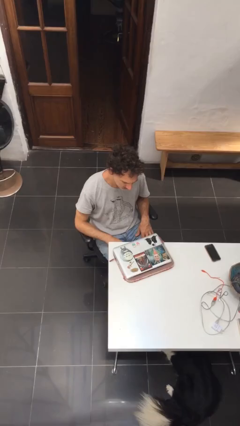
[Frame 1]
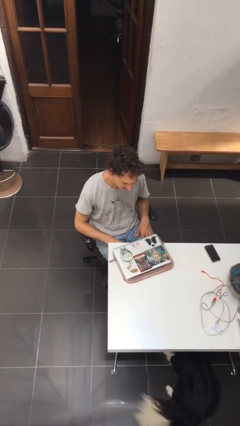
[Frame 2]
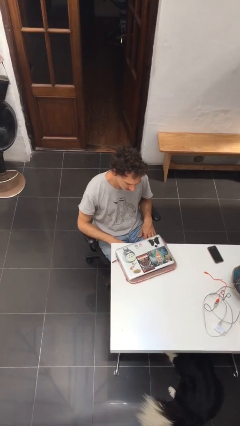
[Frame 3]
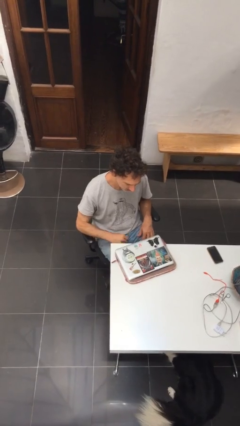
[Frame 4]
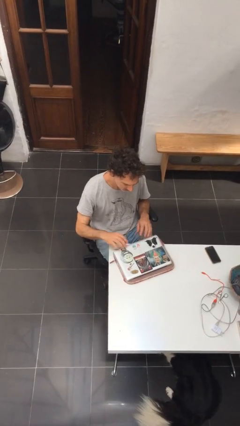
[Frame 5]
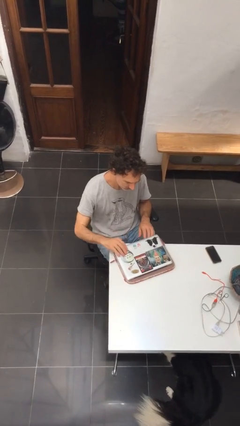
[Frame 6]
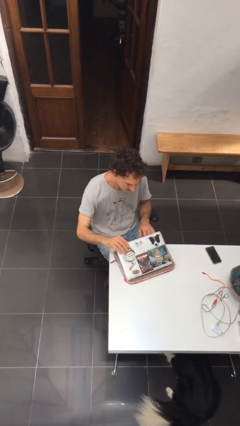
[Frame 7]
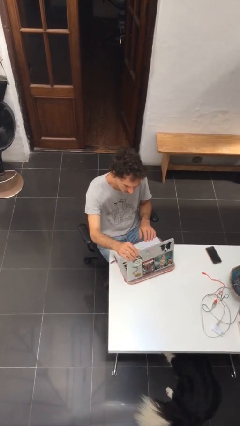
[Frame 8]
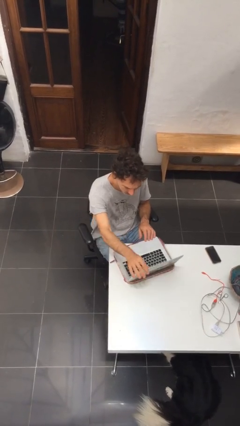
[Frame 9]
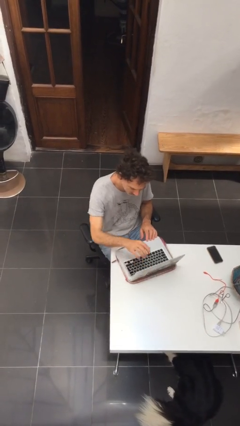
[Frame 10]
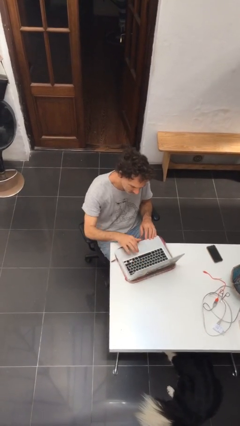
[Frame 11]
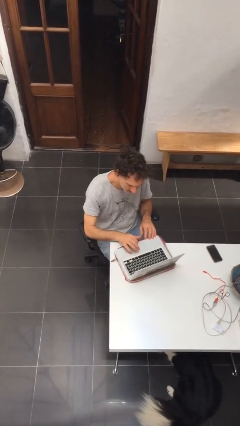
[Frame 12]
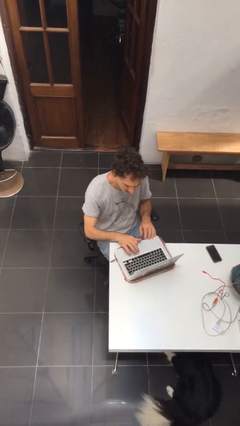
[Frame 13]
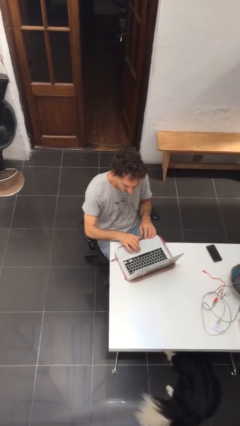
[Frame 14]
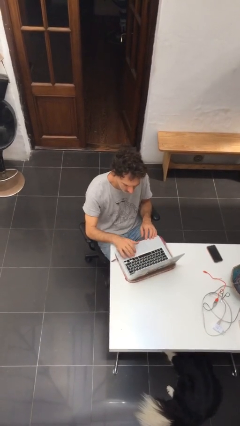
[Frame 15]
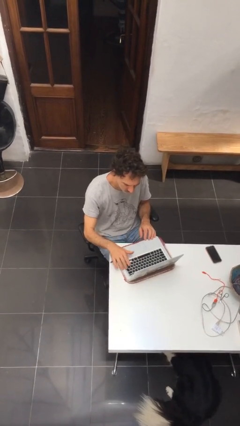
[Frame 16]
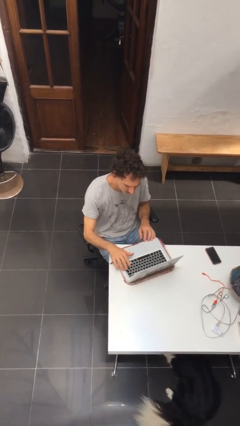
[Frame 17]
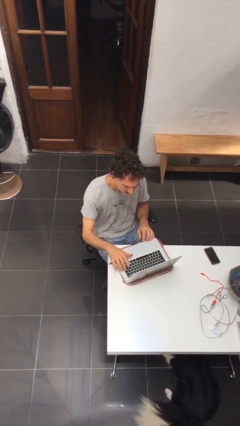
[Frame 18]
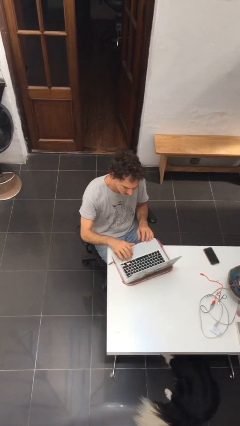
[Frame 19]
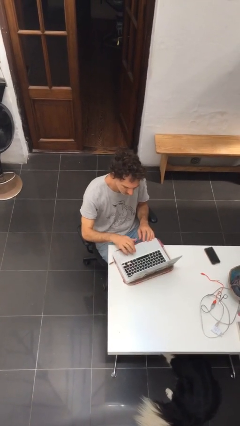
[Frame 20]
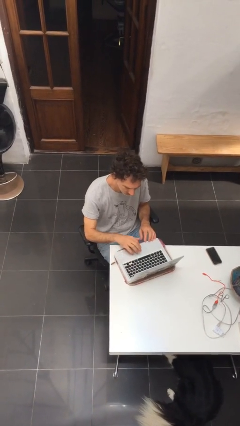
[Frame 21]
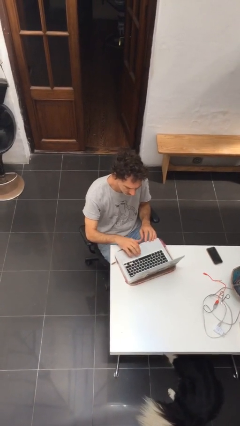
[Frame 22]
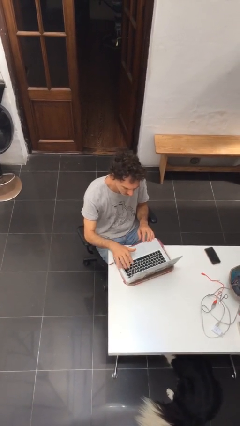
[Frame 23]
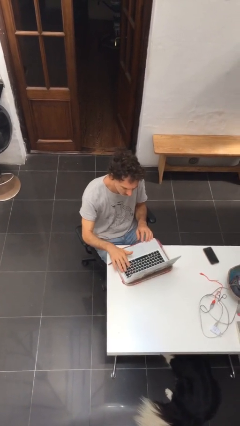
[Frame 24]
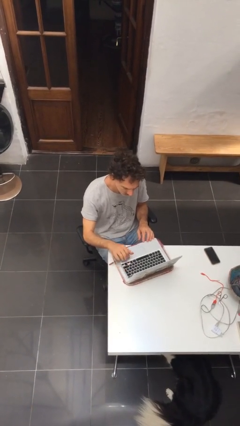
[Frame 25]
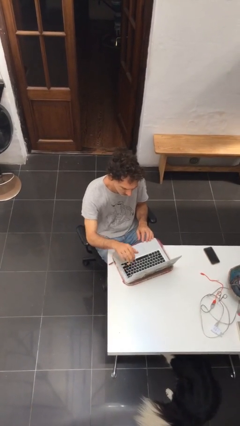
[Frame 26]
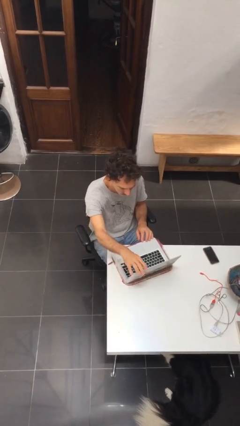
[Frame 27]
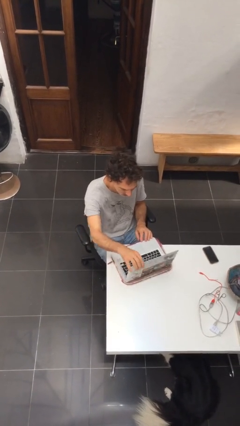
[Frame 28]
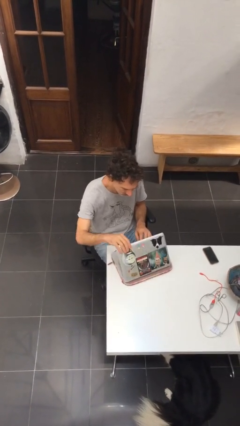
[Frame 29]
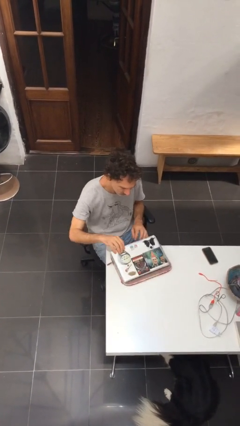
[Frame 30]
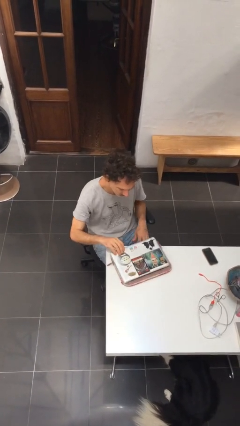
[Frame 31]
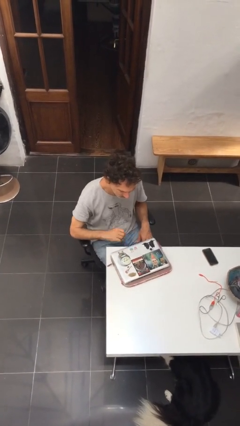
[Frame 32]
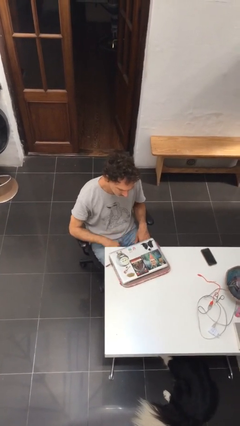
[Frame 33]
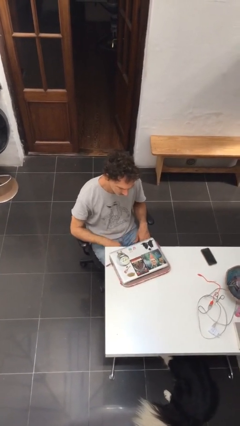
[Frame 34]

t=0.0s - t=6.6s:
person interacts with laptop

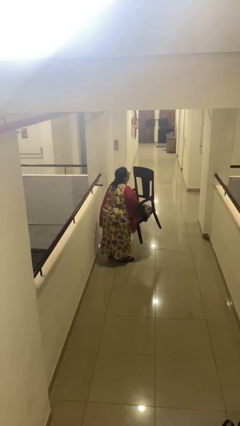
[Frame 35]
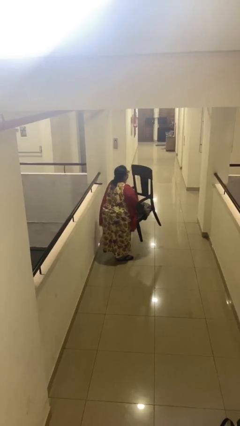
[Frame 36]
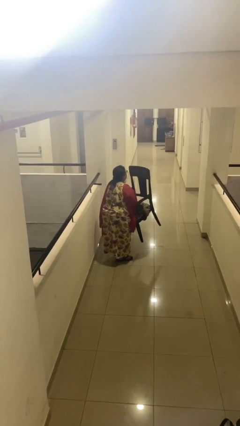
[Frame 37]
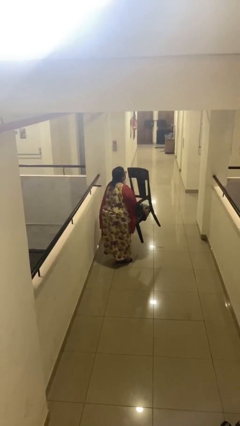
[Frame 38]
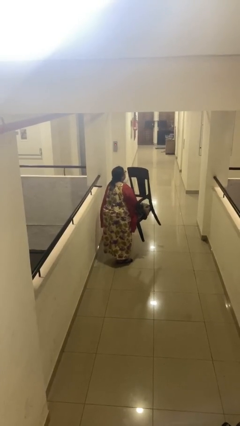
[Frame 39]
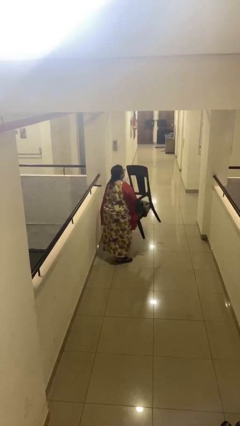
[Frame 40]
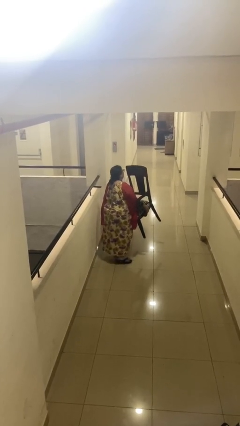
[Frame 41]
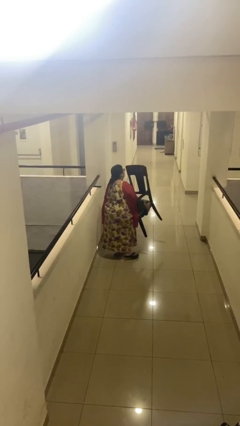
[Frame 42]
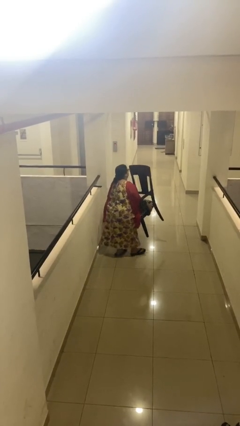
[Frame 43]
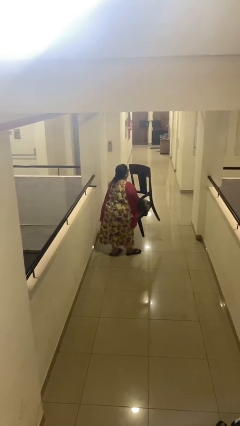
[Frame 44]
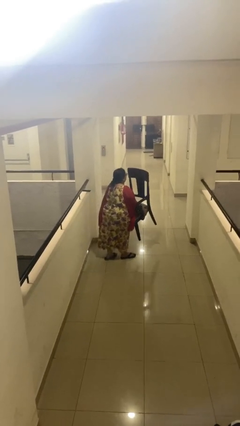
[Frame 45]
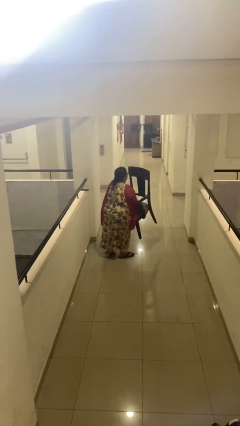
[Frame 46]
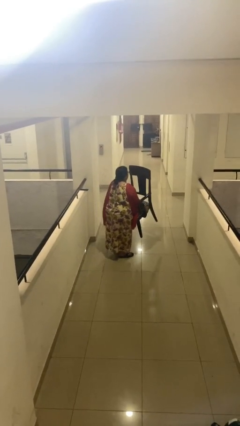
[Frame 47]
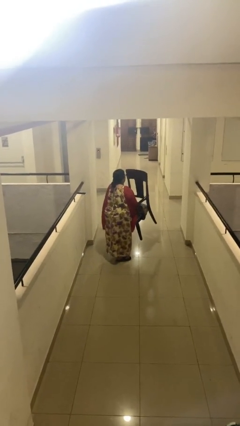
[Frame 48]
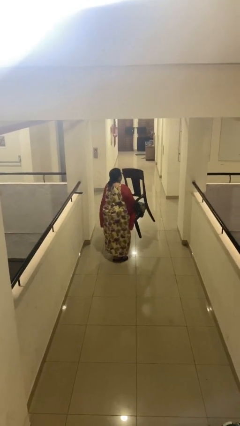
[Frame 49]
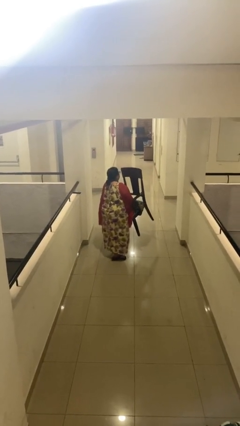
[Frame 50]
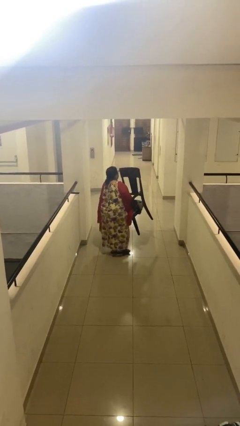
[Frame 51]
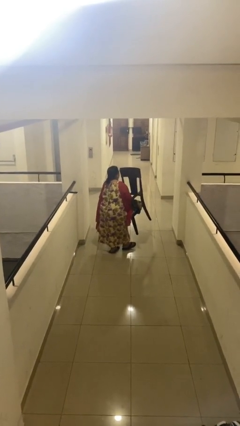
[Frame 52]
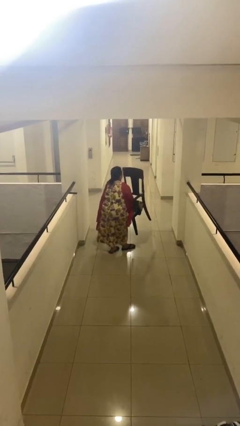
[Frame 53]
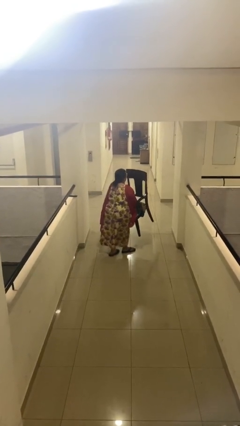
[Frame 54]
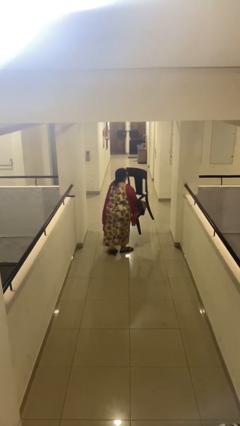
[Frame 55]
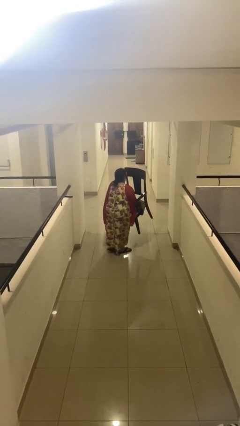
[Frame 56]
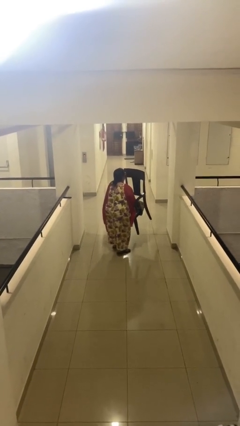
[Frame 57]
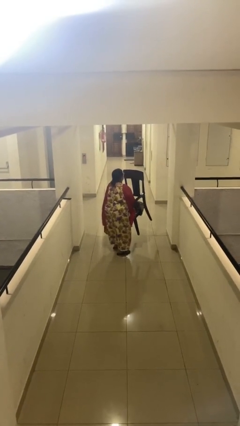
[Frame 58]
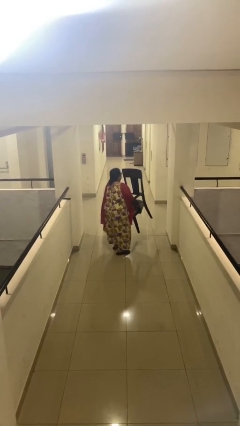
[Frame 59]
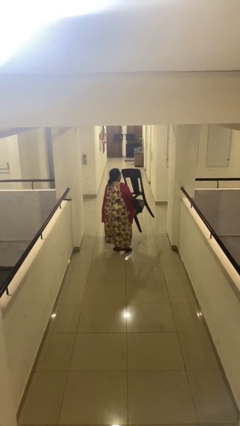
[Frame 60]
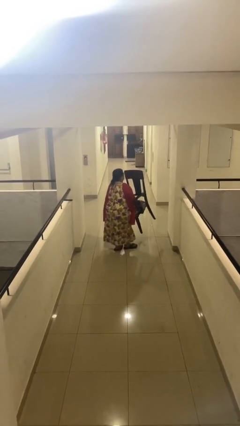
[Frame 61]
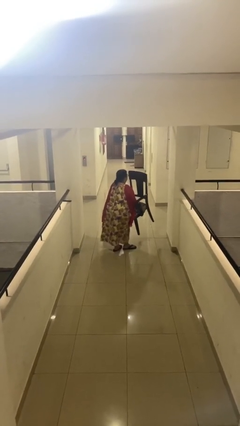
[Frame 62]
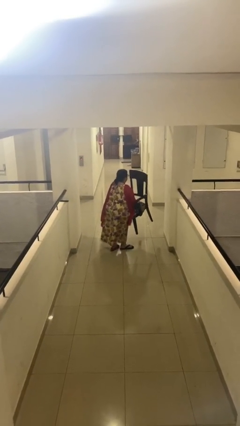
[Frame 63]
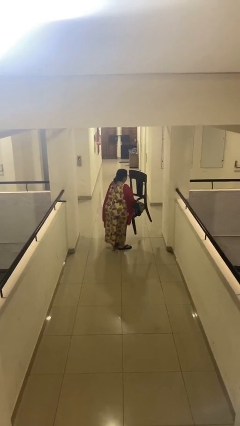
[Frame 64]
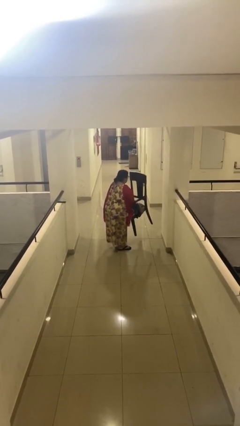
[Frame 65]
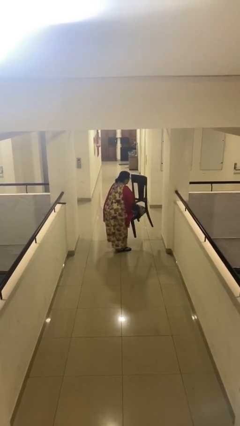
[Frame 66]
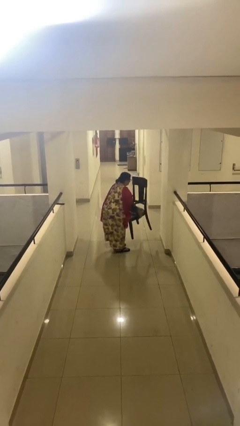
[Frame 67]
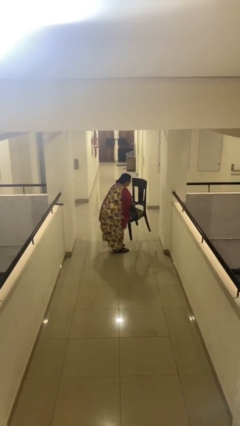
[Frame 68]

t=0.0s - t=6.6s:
person carries heavy object

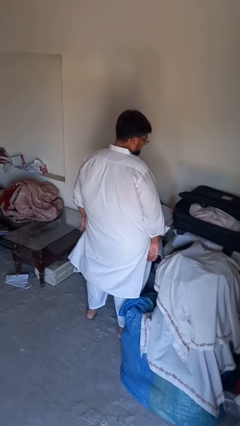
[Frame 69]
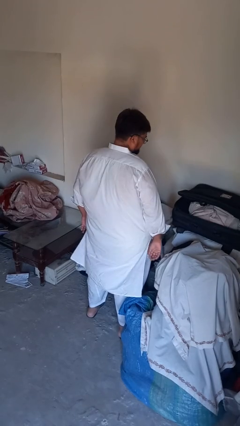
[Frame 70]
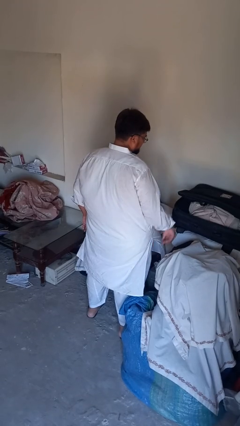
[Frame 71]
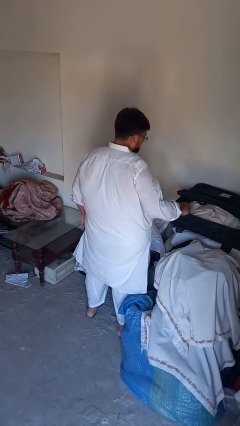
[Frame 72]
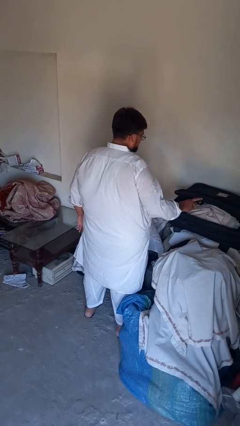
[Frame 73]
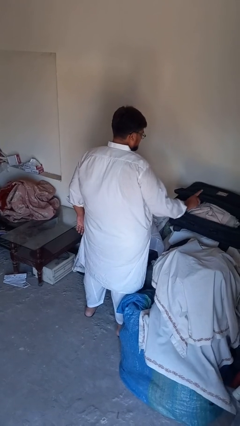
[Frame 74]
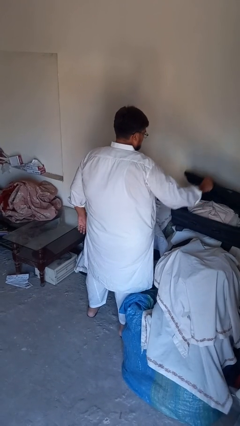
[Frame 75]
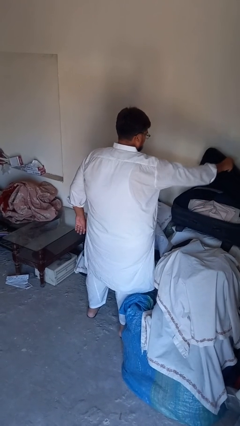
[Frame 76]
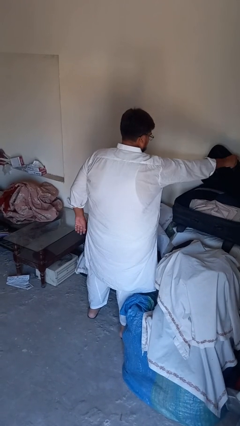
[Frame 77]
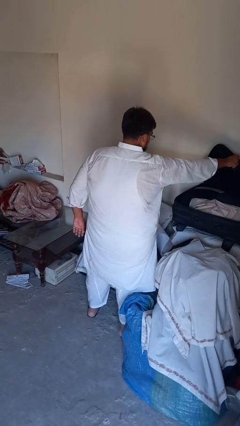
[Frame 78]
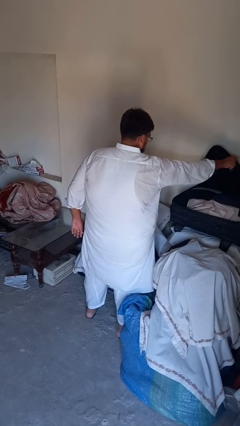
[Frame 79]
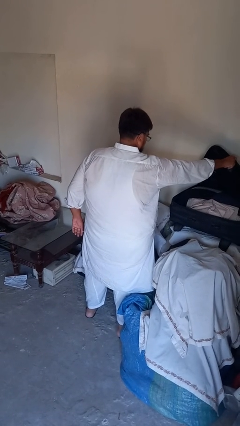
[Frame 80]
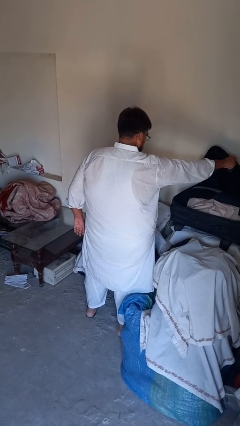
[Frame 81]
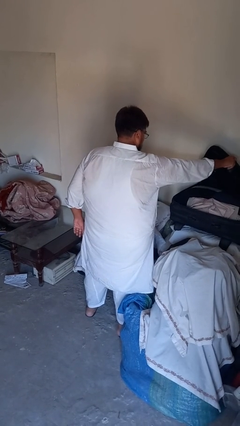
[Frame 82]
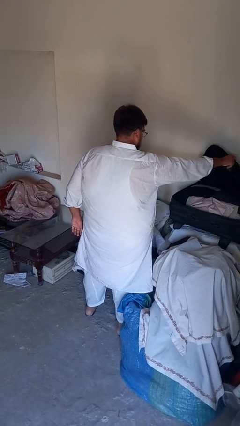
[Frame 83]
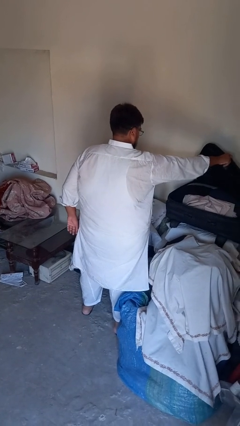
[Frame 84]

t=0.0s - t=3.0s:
person opens suitcase

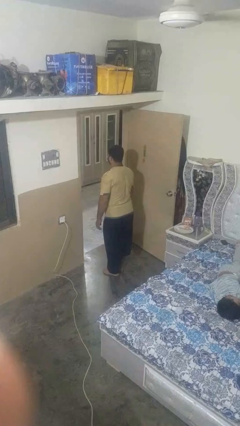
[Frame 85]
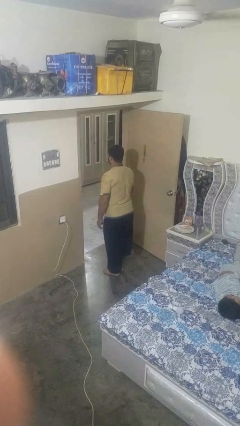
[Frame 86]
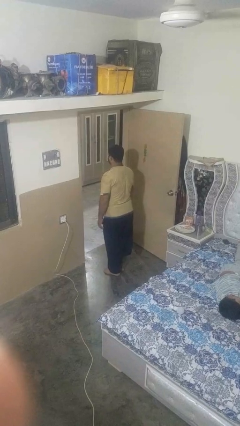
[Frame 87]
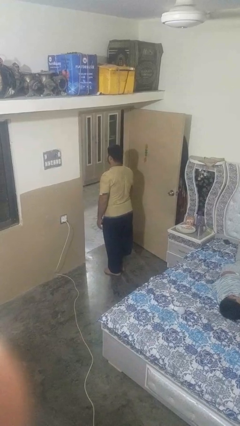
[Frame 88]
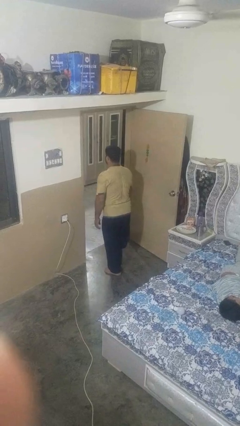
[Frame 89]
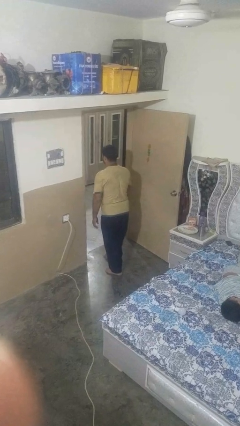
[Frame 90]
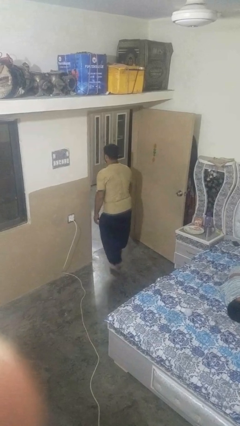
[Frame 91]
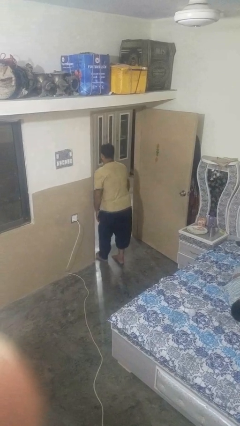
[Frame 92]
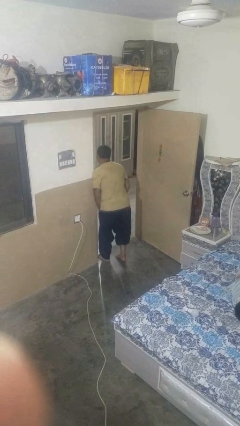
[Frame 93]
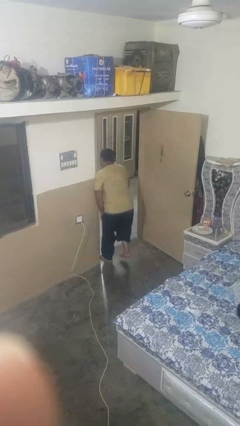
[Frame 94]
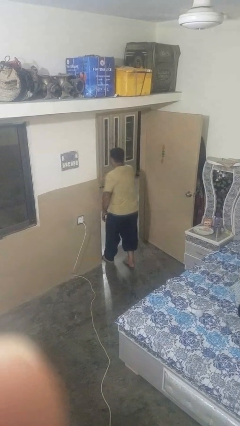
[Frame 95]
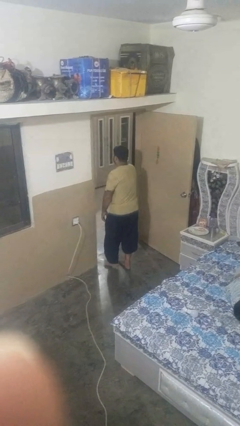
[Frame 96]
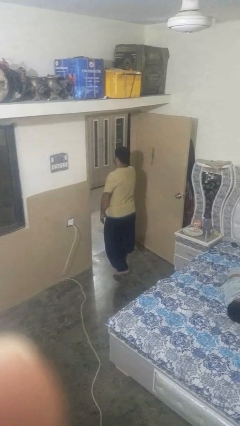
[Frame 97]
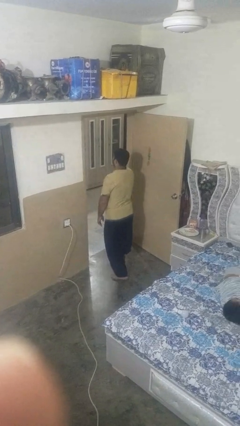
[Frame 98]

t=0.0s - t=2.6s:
person bumps into wall
